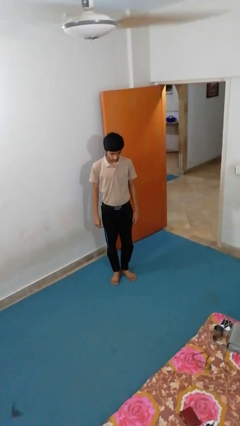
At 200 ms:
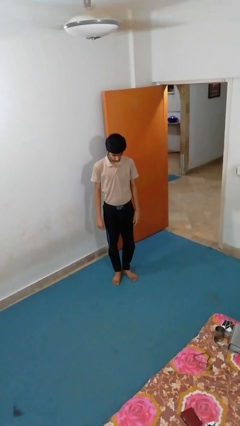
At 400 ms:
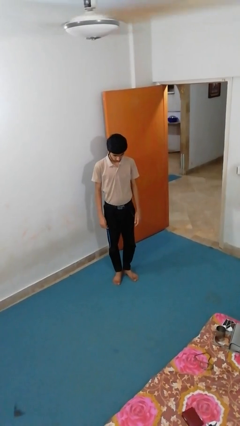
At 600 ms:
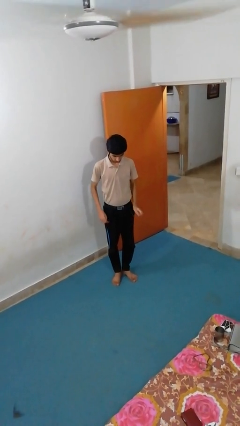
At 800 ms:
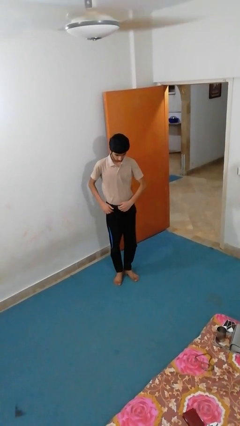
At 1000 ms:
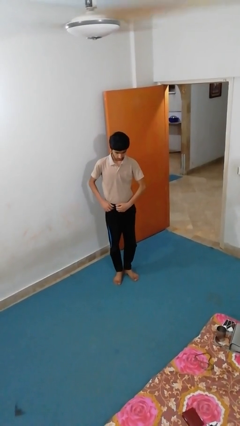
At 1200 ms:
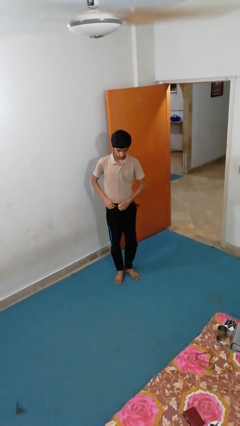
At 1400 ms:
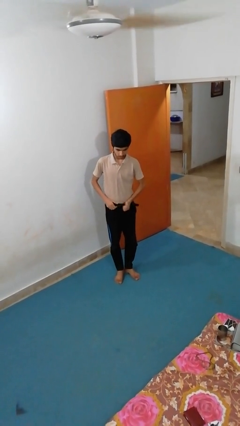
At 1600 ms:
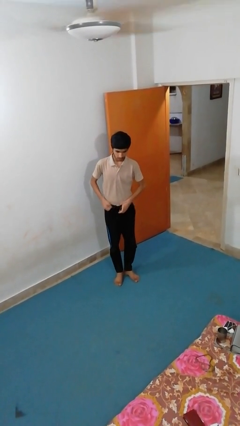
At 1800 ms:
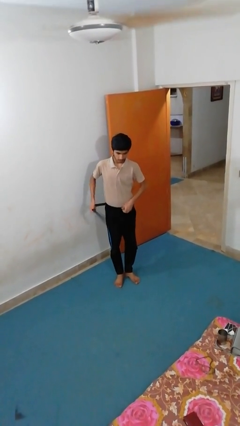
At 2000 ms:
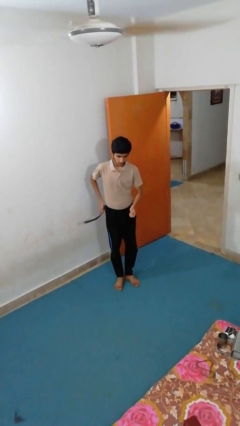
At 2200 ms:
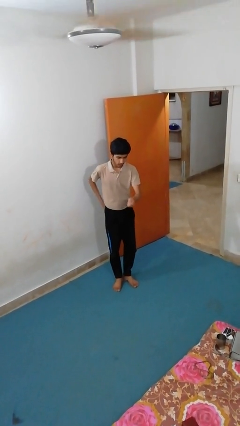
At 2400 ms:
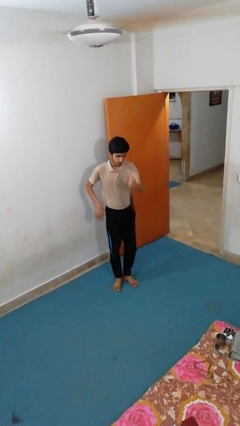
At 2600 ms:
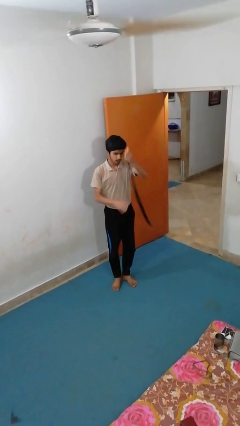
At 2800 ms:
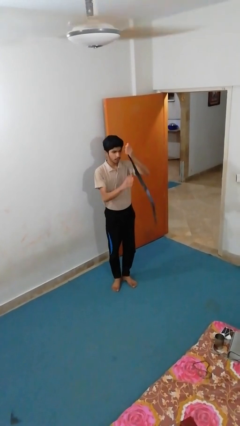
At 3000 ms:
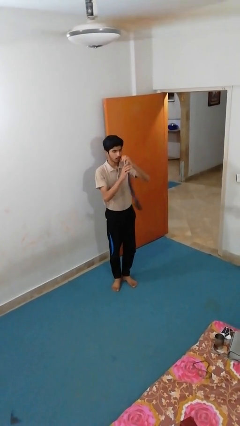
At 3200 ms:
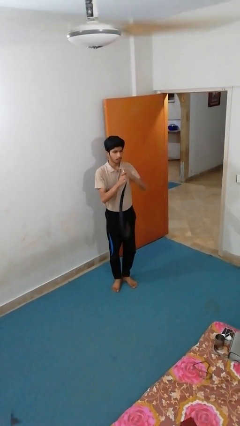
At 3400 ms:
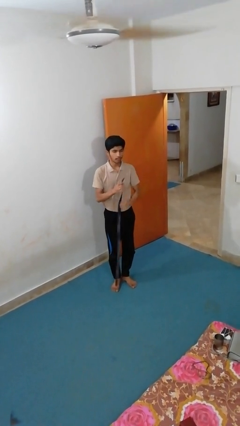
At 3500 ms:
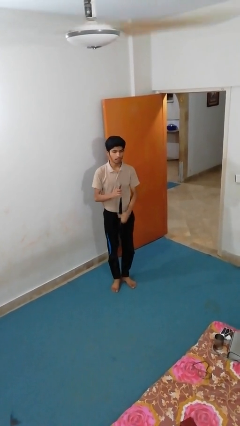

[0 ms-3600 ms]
person takes off belt

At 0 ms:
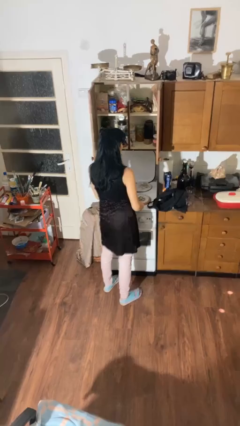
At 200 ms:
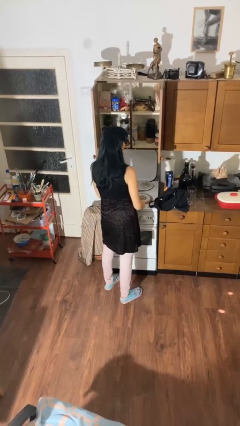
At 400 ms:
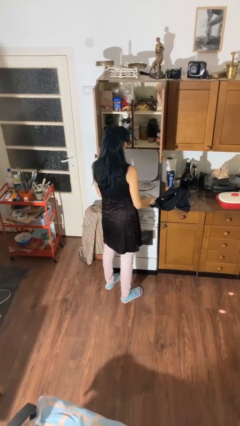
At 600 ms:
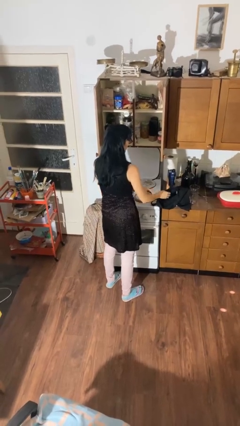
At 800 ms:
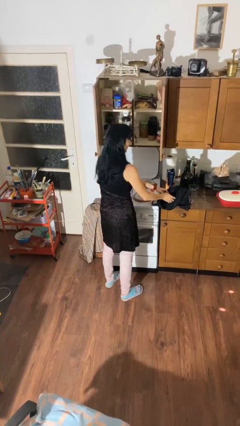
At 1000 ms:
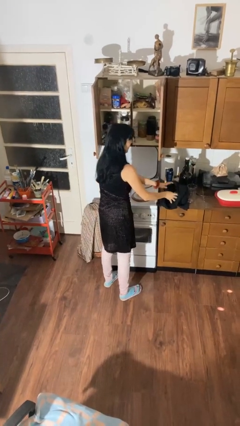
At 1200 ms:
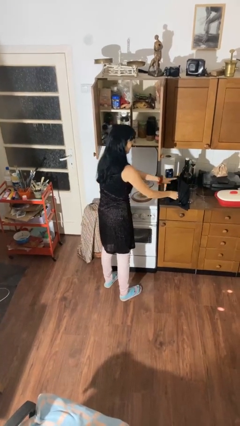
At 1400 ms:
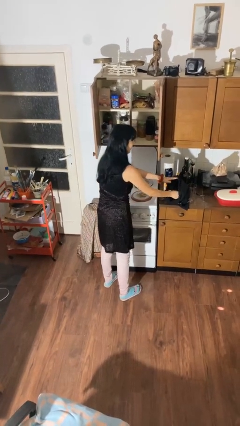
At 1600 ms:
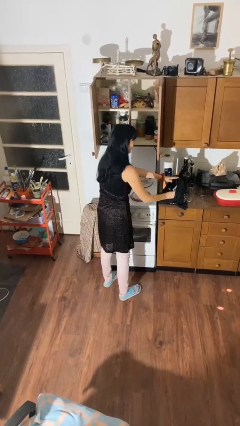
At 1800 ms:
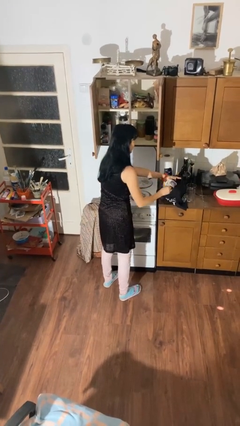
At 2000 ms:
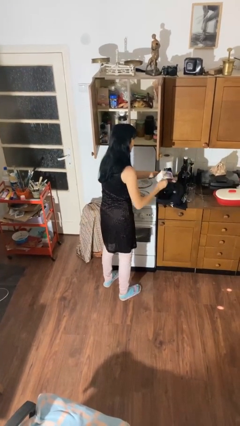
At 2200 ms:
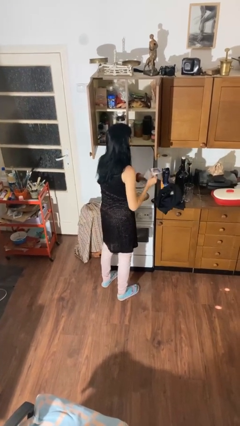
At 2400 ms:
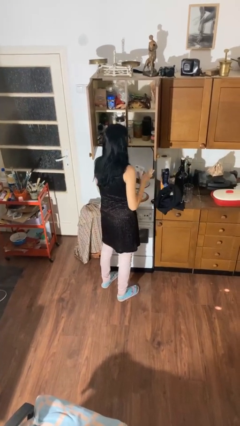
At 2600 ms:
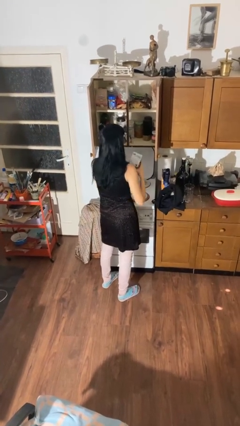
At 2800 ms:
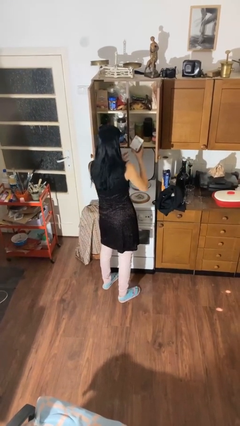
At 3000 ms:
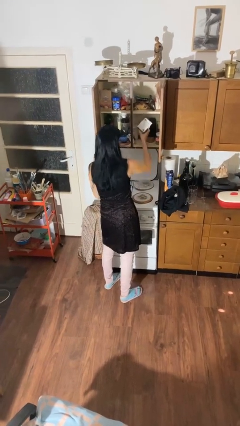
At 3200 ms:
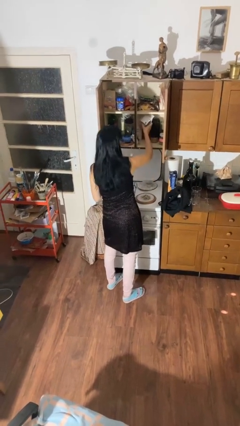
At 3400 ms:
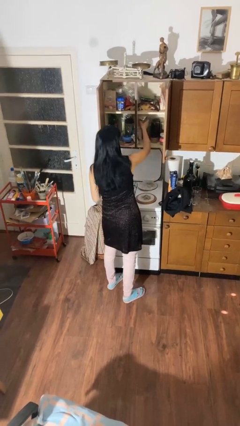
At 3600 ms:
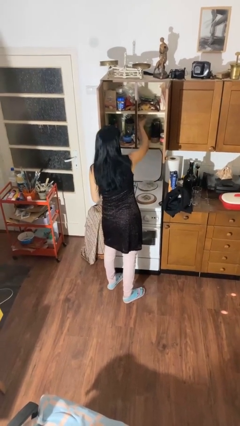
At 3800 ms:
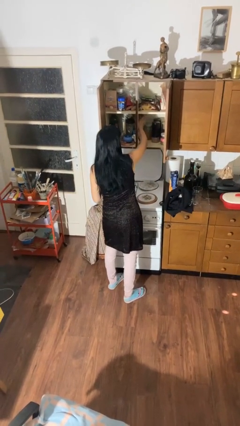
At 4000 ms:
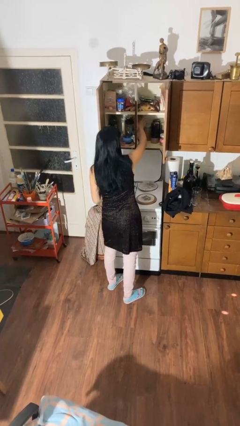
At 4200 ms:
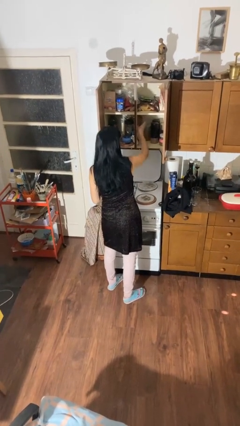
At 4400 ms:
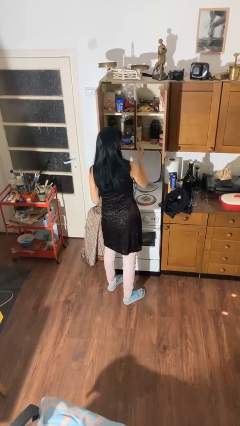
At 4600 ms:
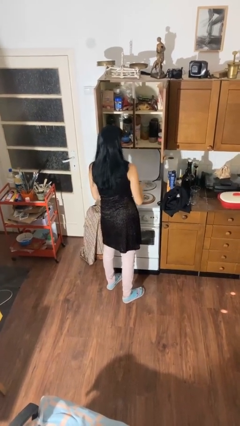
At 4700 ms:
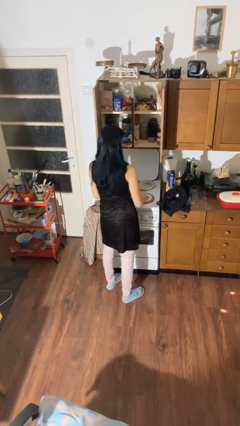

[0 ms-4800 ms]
person loads groceries into cabinet

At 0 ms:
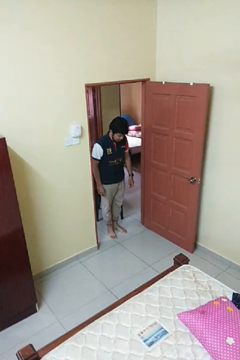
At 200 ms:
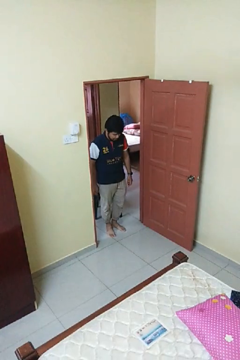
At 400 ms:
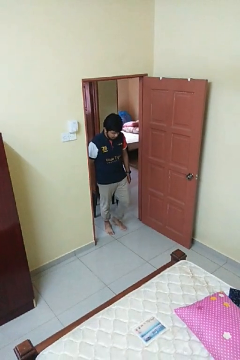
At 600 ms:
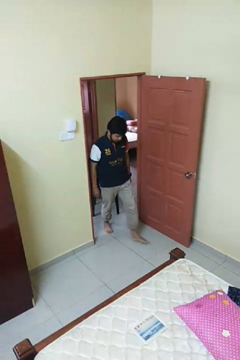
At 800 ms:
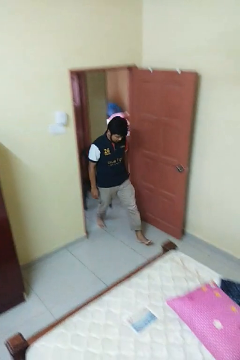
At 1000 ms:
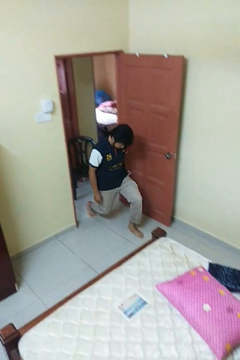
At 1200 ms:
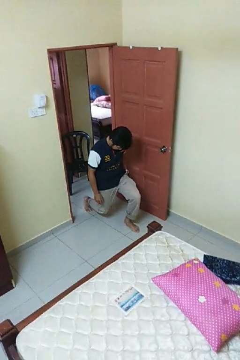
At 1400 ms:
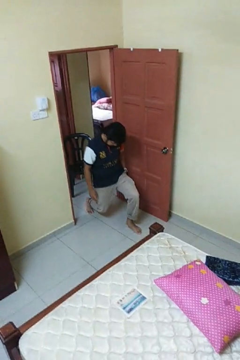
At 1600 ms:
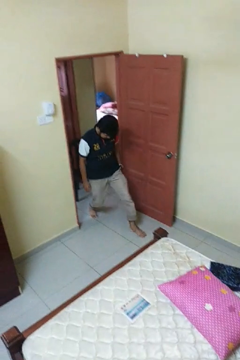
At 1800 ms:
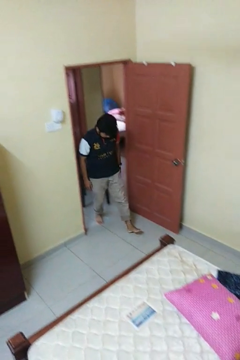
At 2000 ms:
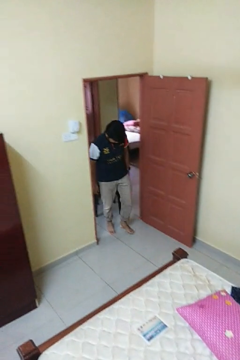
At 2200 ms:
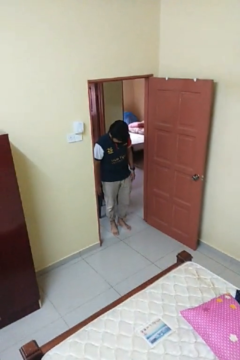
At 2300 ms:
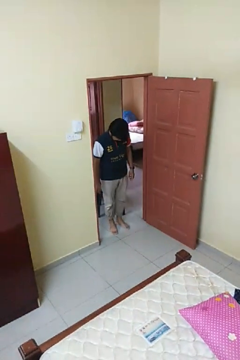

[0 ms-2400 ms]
person exercises with lunges

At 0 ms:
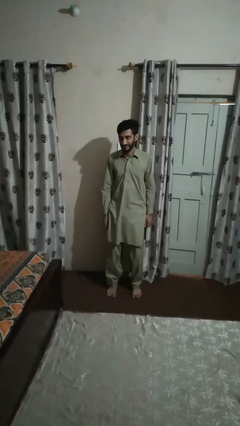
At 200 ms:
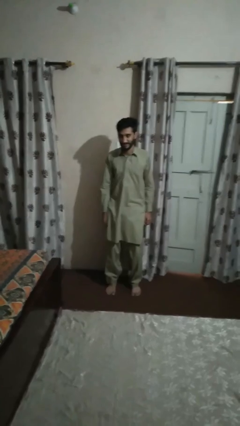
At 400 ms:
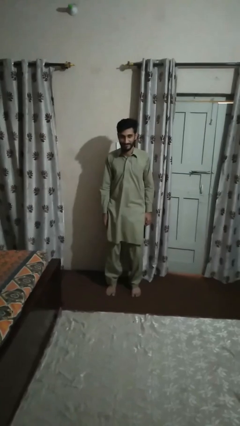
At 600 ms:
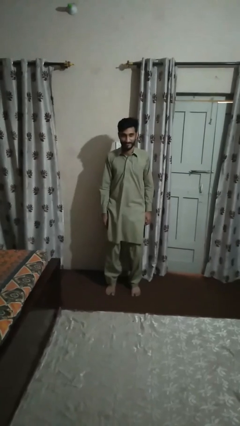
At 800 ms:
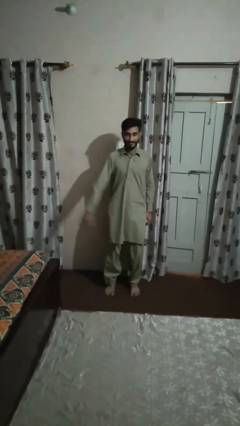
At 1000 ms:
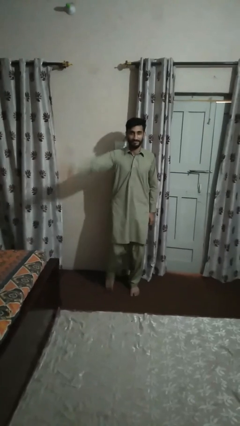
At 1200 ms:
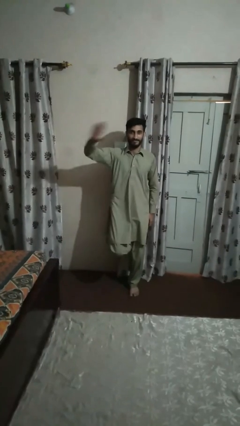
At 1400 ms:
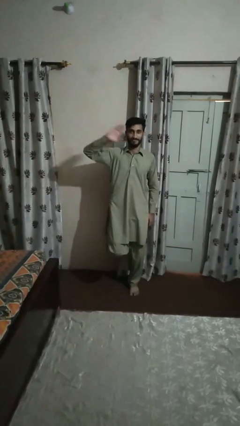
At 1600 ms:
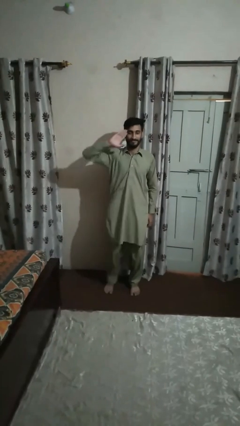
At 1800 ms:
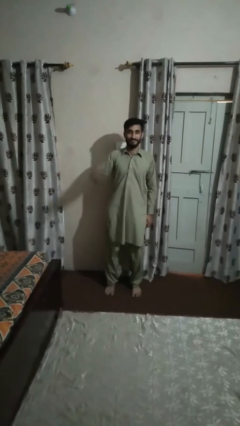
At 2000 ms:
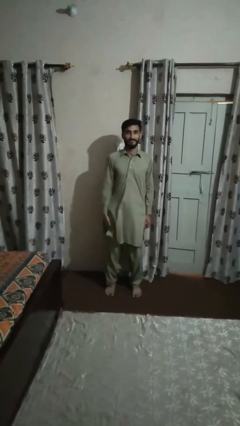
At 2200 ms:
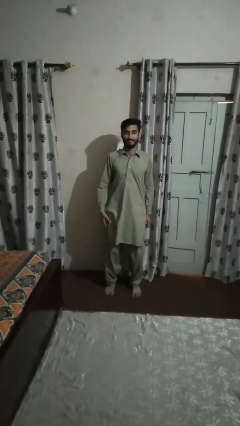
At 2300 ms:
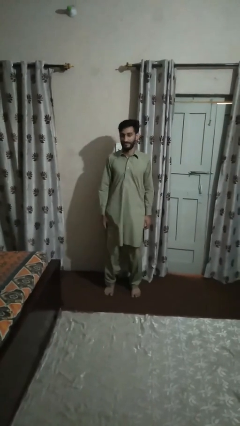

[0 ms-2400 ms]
person salutes

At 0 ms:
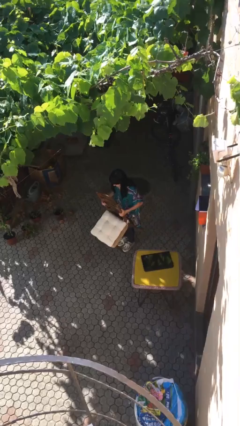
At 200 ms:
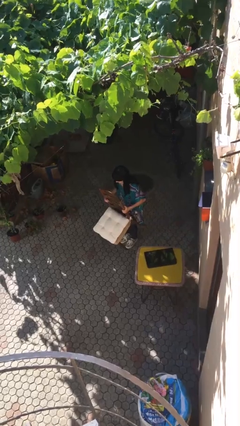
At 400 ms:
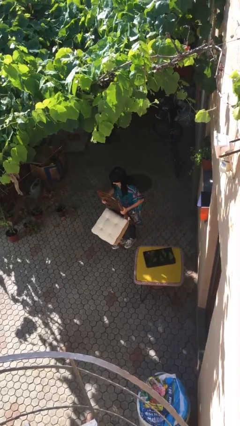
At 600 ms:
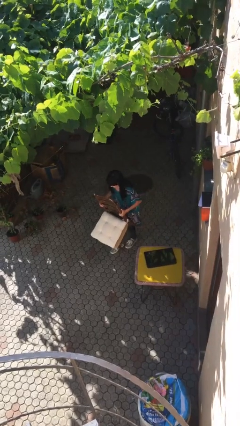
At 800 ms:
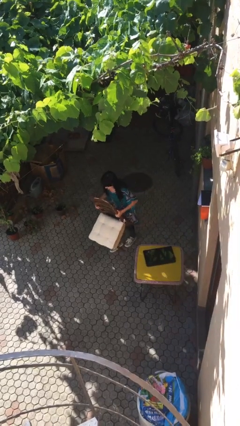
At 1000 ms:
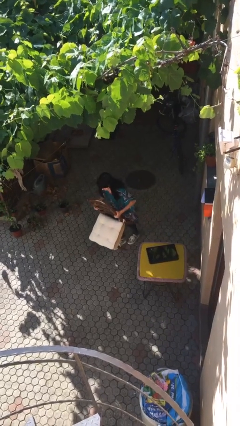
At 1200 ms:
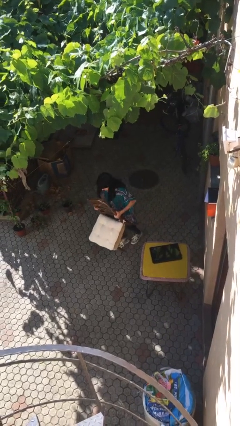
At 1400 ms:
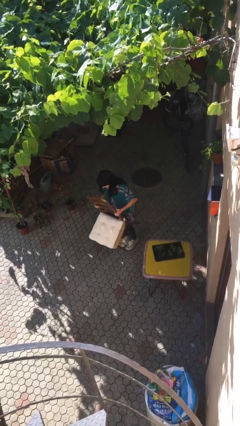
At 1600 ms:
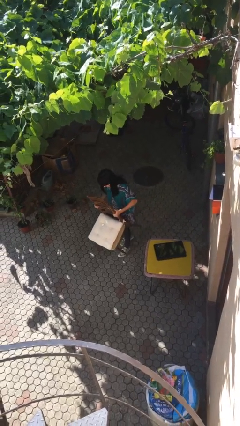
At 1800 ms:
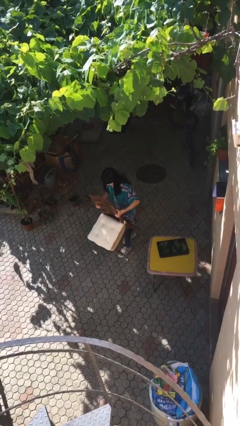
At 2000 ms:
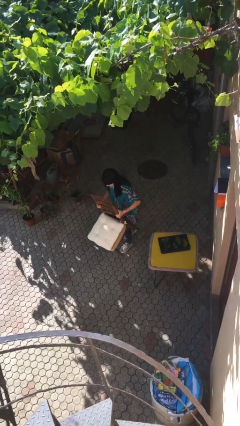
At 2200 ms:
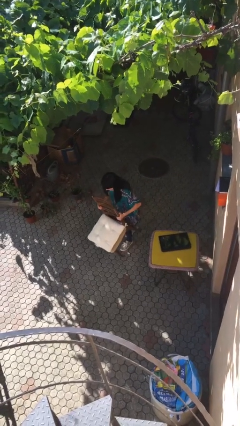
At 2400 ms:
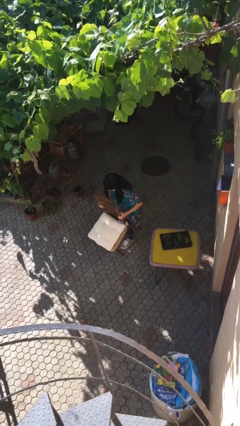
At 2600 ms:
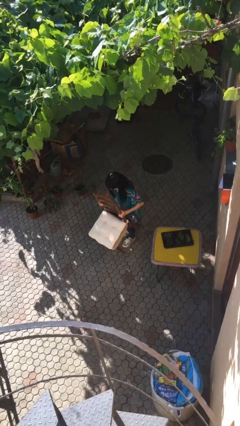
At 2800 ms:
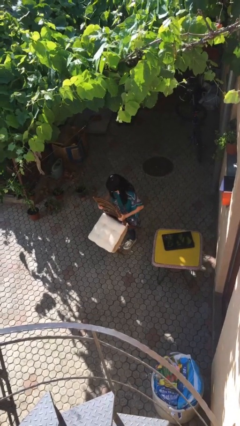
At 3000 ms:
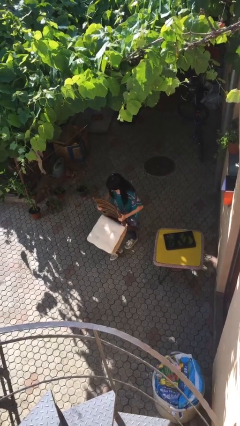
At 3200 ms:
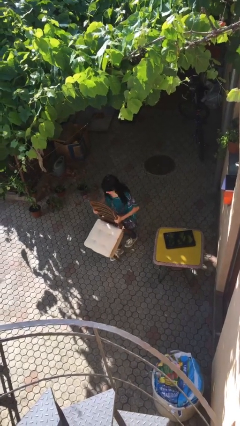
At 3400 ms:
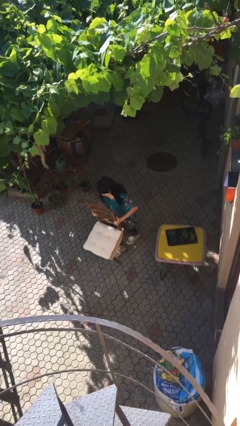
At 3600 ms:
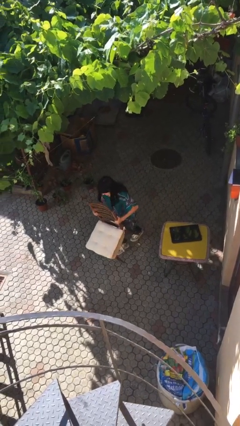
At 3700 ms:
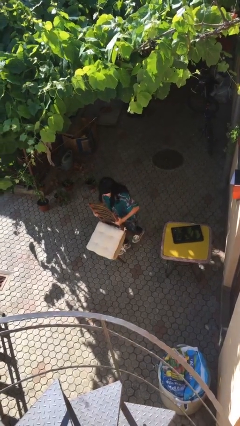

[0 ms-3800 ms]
person carries heavy object

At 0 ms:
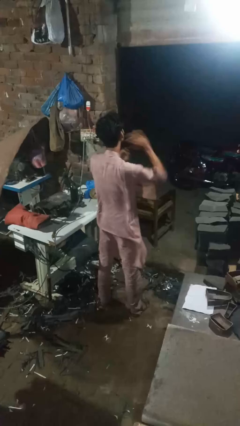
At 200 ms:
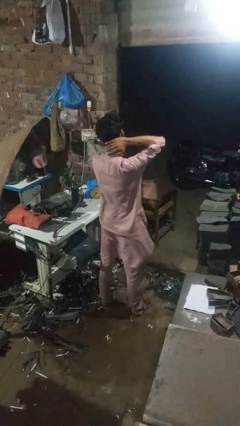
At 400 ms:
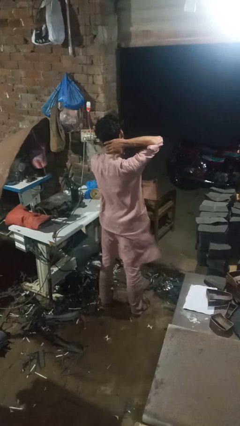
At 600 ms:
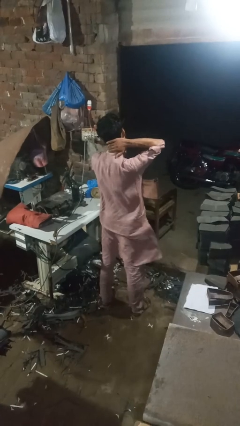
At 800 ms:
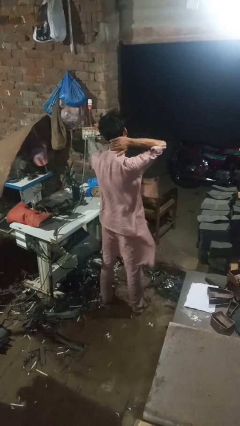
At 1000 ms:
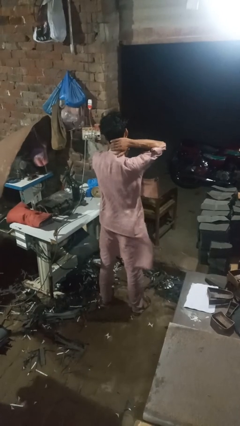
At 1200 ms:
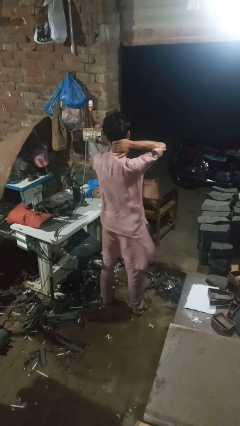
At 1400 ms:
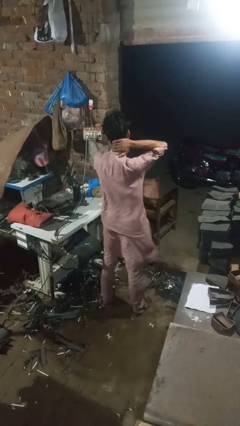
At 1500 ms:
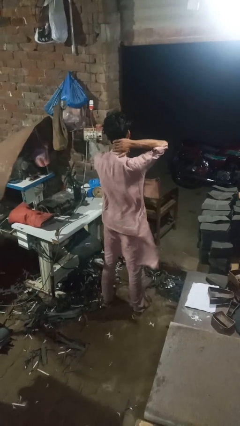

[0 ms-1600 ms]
person rubs neck
